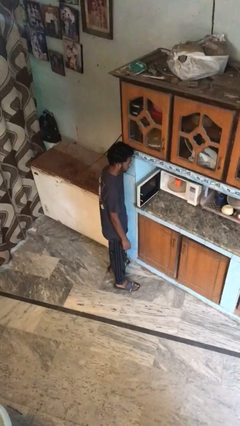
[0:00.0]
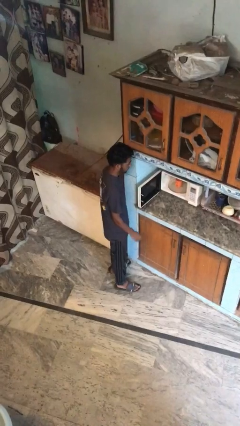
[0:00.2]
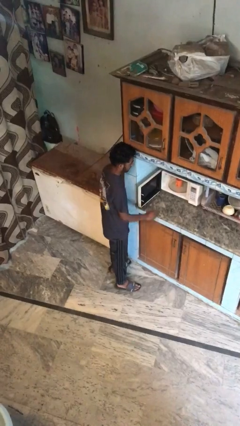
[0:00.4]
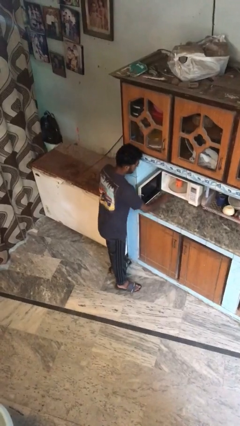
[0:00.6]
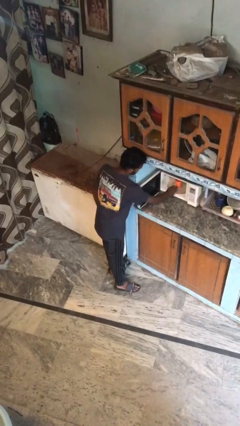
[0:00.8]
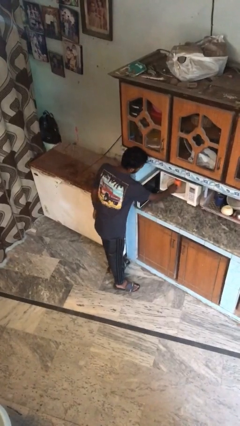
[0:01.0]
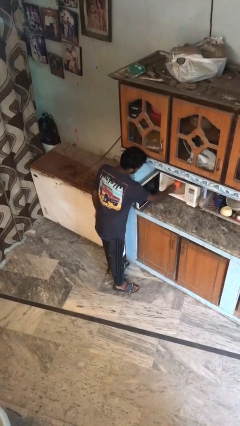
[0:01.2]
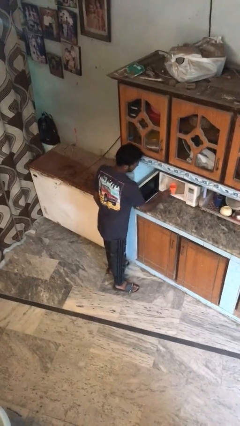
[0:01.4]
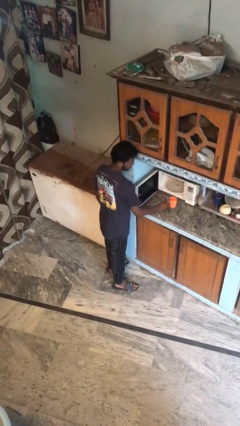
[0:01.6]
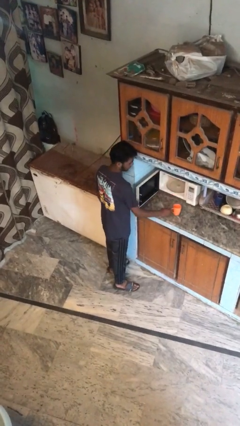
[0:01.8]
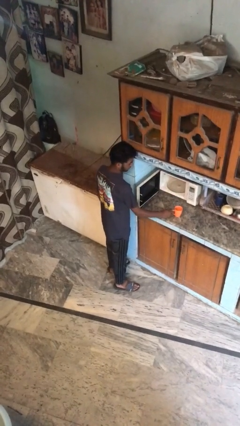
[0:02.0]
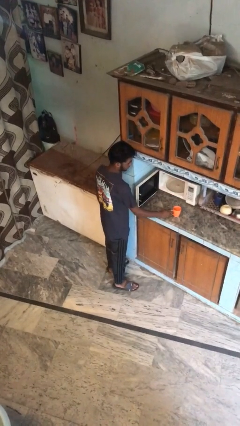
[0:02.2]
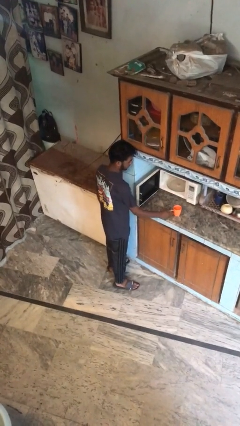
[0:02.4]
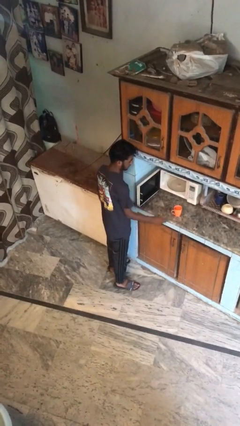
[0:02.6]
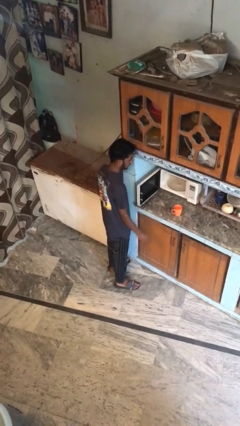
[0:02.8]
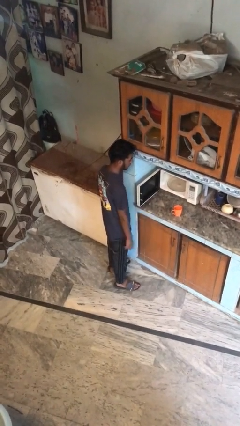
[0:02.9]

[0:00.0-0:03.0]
person takes object from microwave

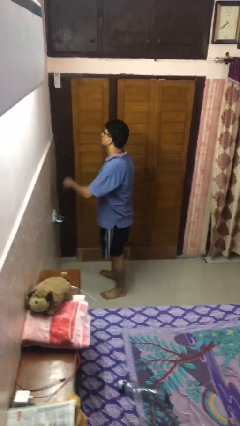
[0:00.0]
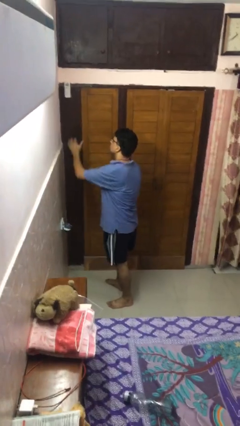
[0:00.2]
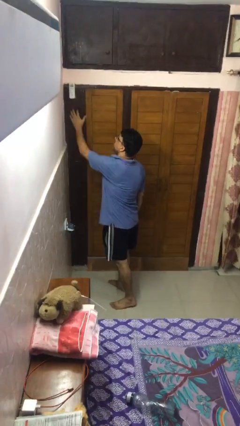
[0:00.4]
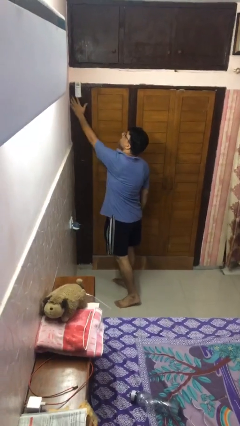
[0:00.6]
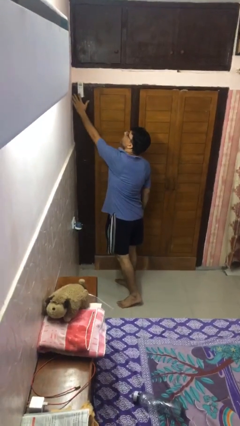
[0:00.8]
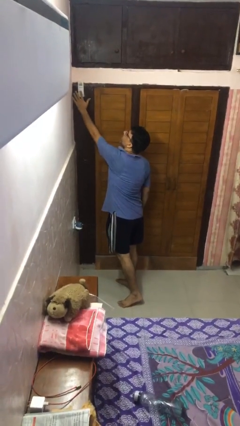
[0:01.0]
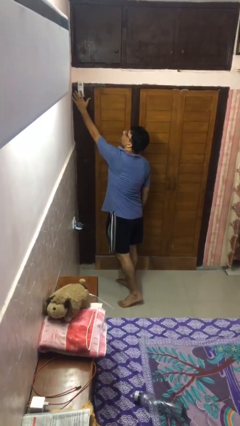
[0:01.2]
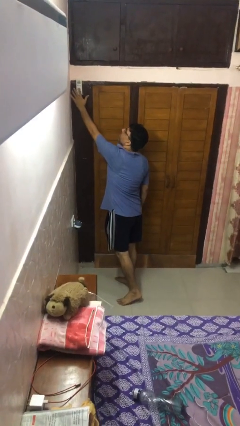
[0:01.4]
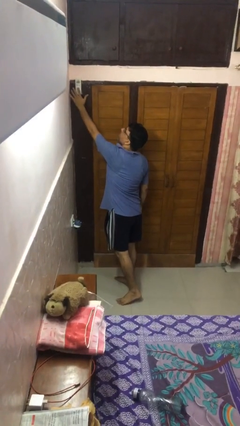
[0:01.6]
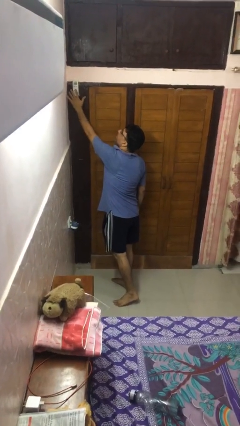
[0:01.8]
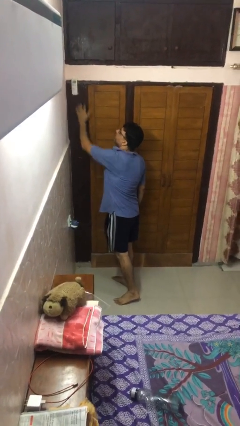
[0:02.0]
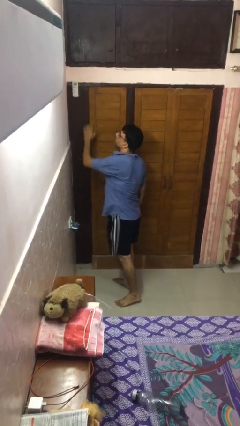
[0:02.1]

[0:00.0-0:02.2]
person adjusts thermostat

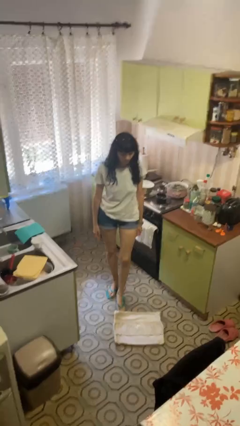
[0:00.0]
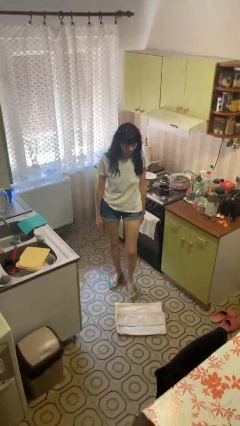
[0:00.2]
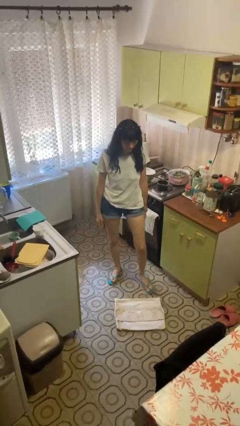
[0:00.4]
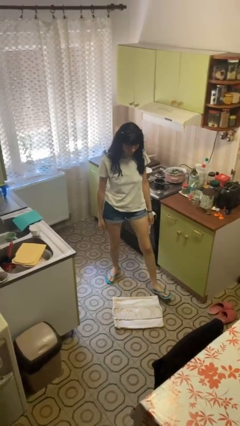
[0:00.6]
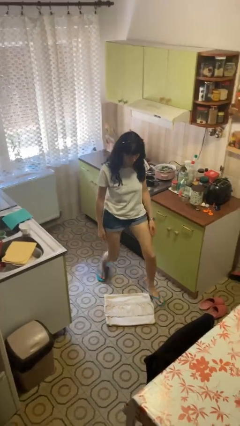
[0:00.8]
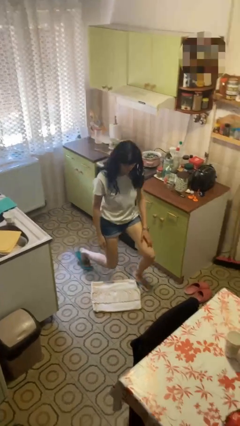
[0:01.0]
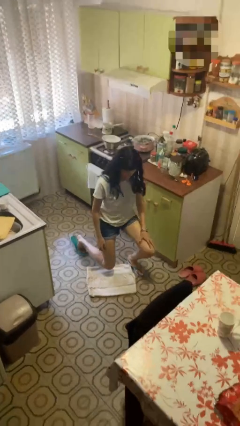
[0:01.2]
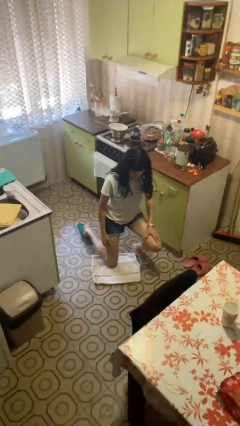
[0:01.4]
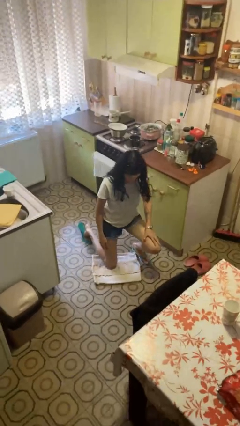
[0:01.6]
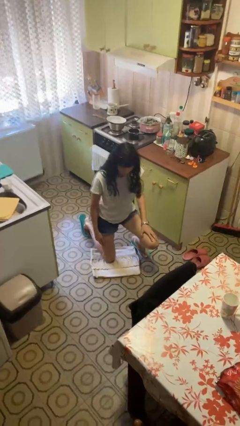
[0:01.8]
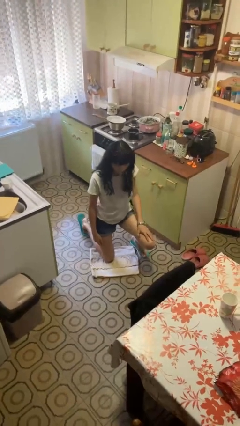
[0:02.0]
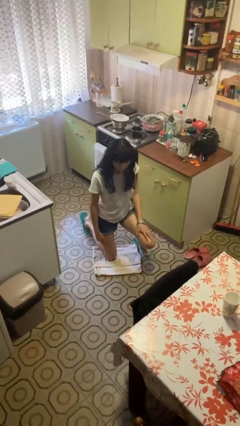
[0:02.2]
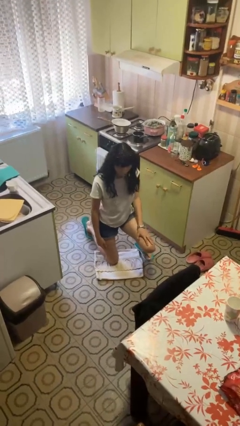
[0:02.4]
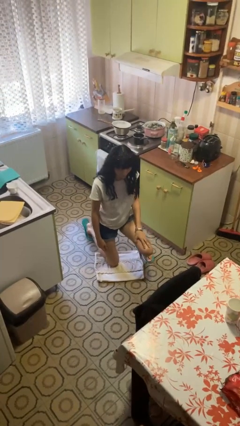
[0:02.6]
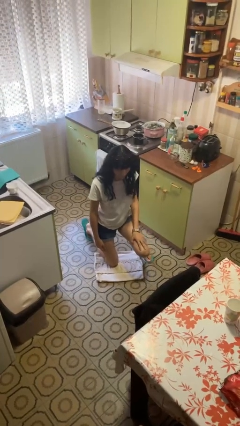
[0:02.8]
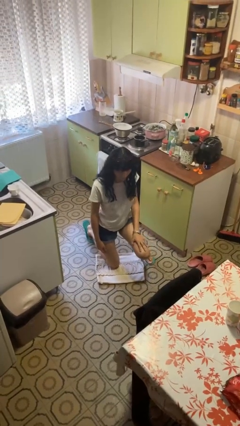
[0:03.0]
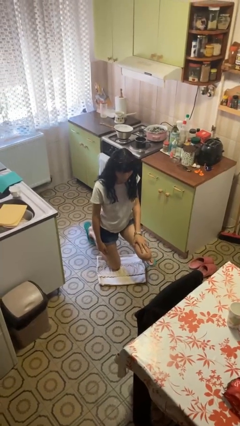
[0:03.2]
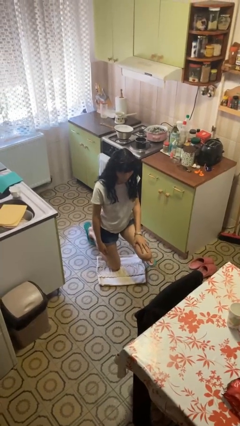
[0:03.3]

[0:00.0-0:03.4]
person kneels

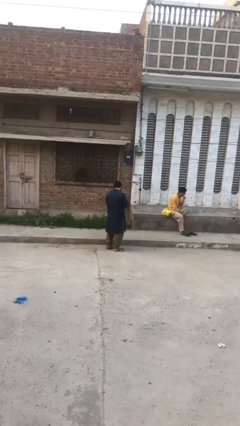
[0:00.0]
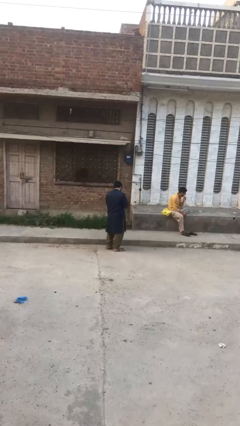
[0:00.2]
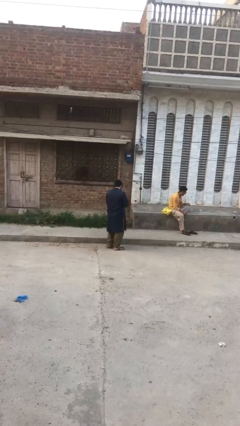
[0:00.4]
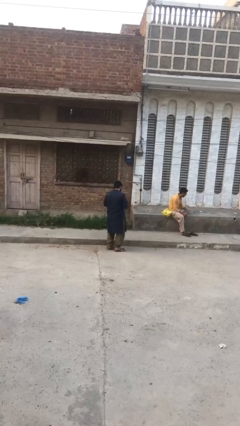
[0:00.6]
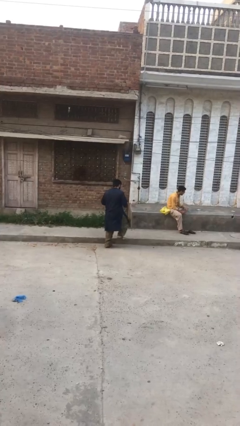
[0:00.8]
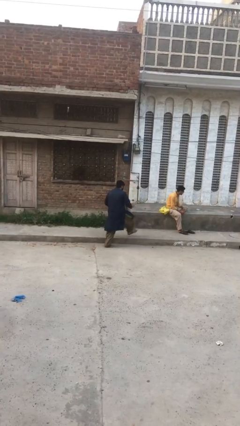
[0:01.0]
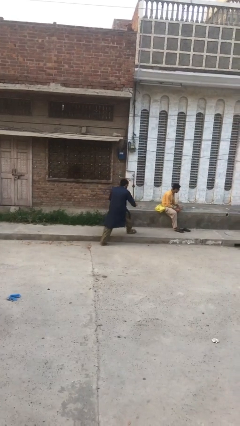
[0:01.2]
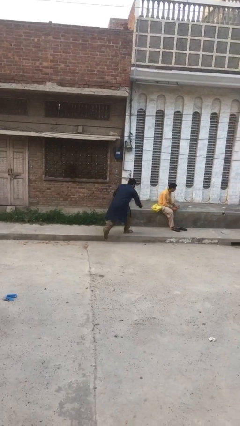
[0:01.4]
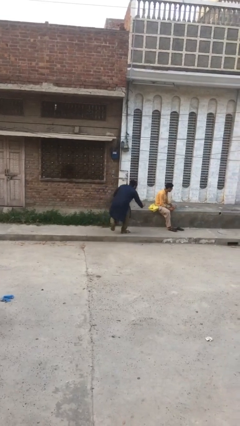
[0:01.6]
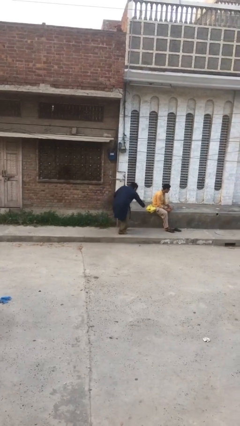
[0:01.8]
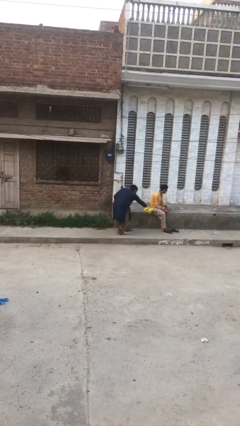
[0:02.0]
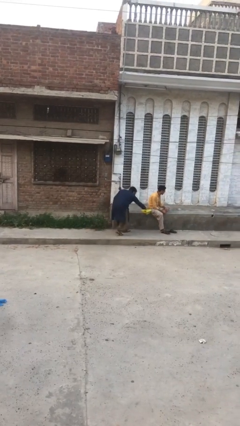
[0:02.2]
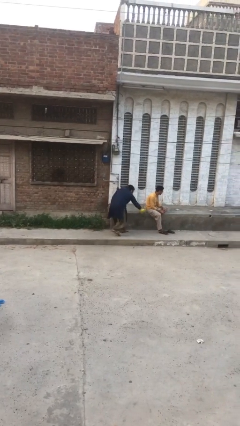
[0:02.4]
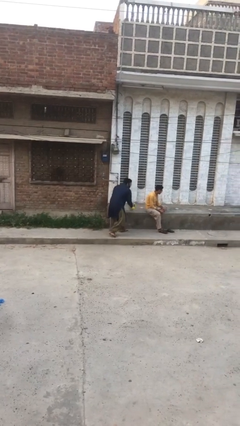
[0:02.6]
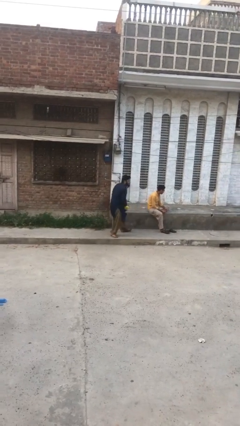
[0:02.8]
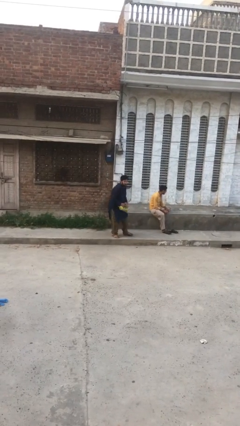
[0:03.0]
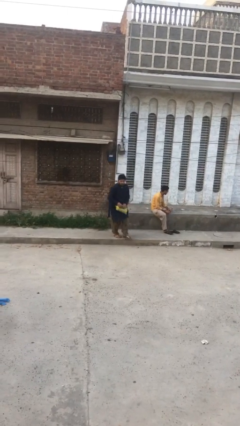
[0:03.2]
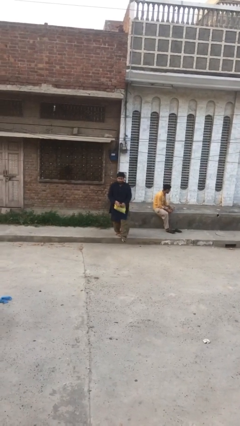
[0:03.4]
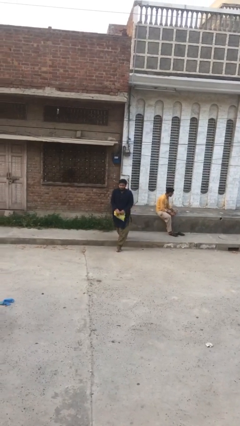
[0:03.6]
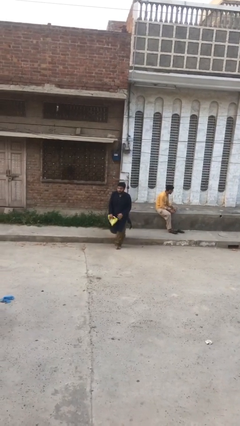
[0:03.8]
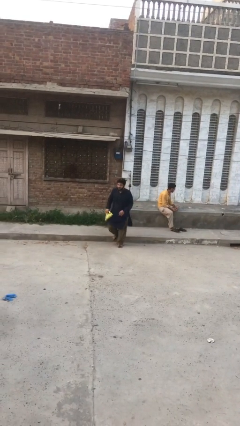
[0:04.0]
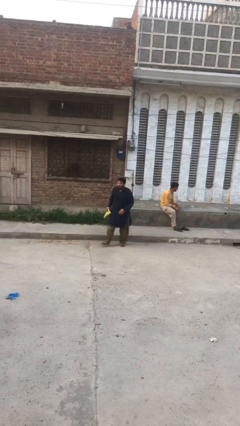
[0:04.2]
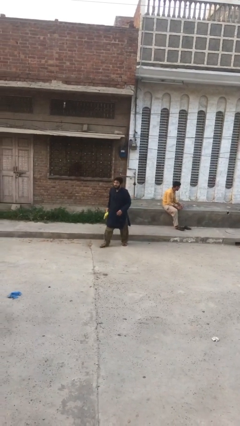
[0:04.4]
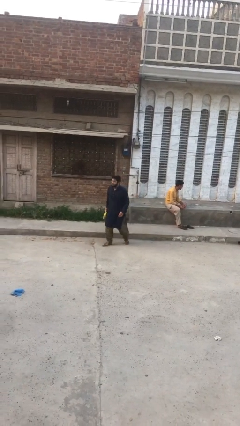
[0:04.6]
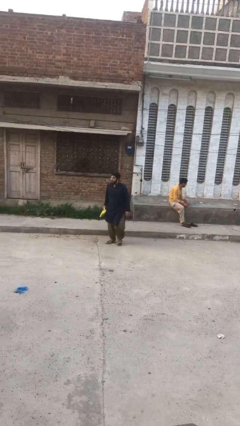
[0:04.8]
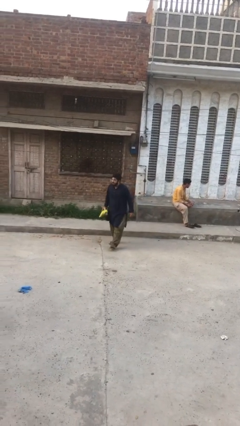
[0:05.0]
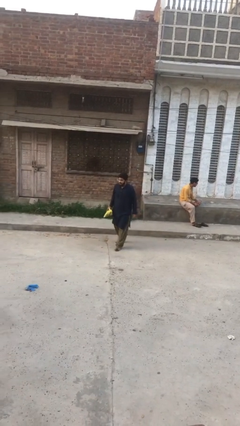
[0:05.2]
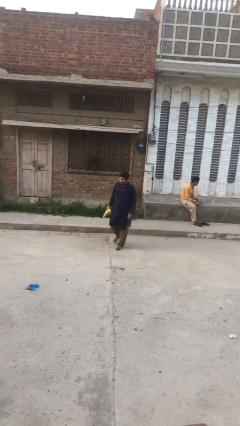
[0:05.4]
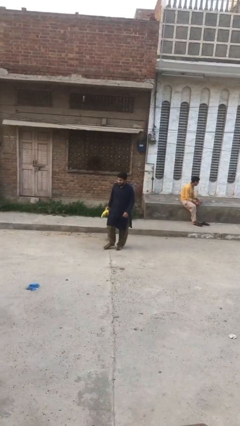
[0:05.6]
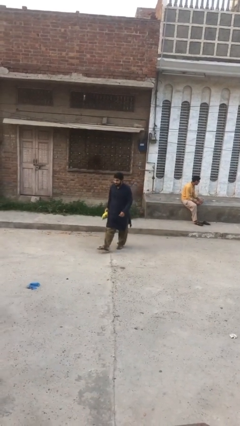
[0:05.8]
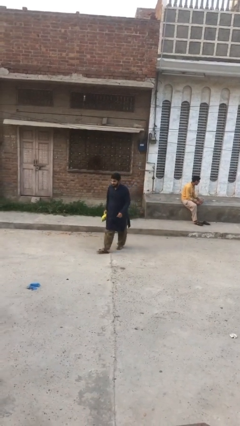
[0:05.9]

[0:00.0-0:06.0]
person steals object from person

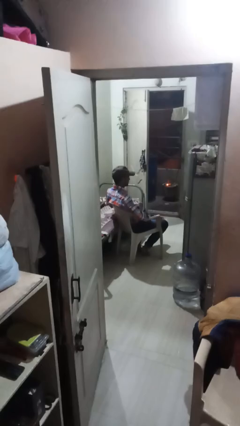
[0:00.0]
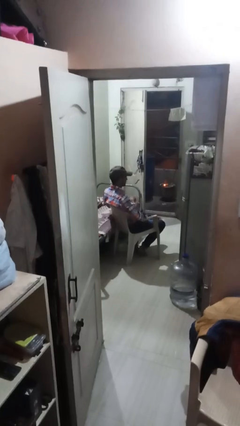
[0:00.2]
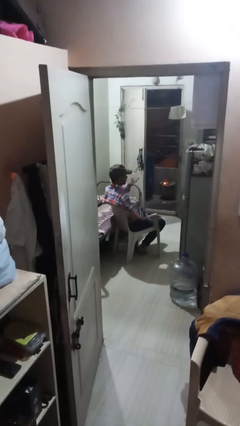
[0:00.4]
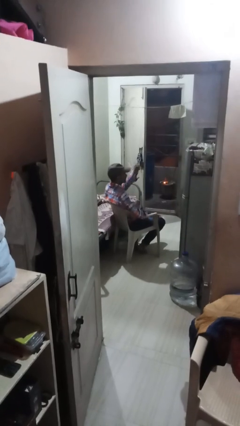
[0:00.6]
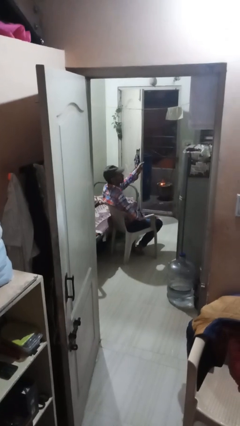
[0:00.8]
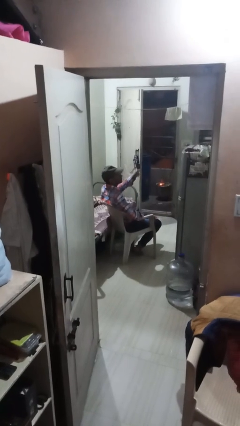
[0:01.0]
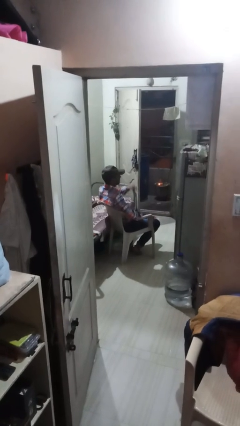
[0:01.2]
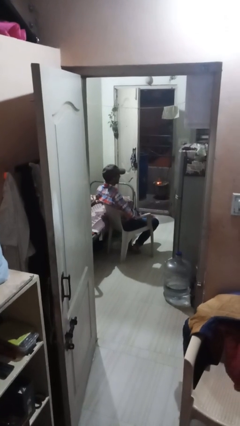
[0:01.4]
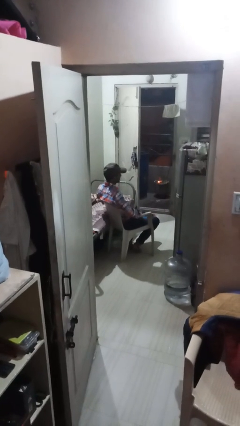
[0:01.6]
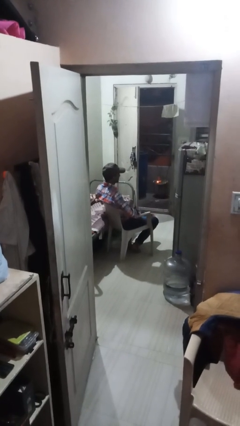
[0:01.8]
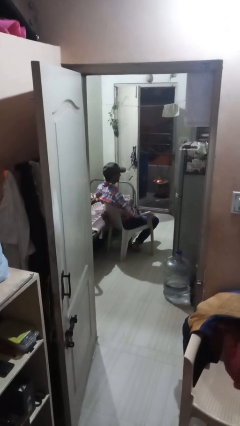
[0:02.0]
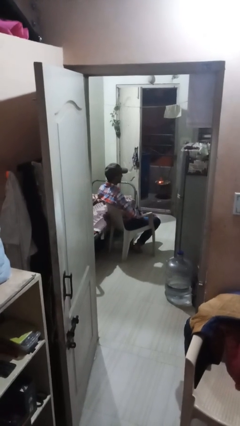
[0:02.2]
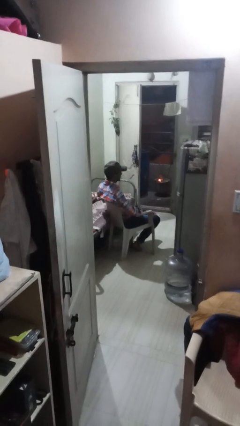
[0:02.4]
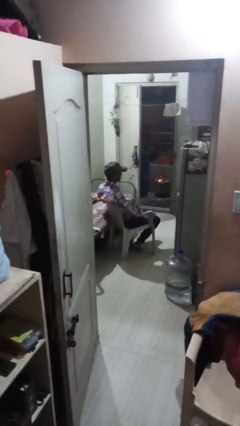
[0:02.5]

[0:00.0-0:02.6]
person snaps fingers

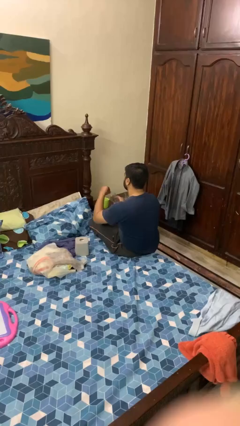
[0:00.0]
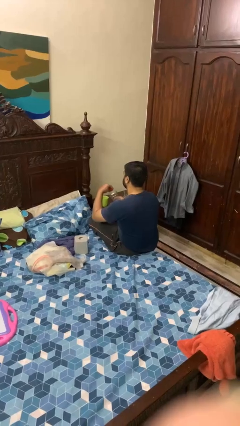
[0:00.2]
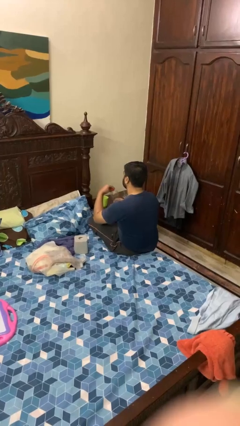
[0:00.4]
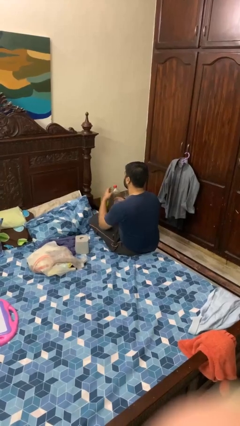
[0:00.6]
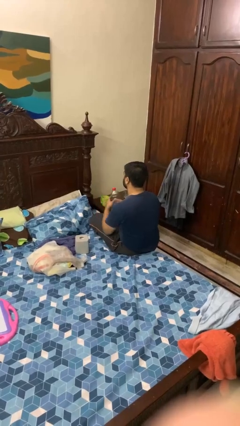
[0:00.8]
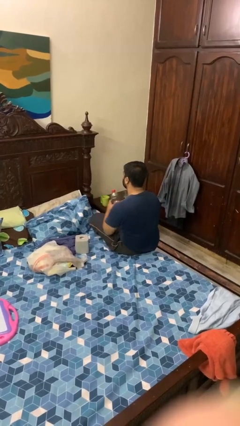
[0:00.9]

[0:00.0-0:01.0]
person screws lid to bottle
